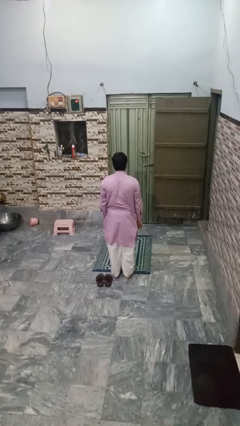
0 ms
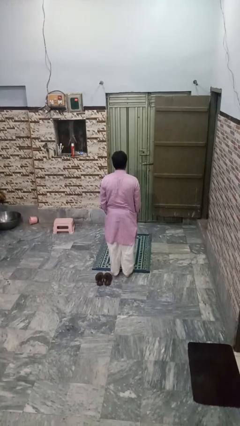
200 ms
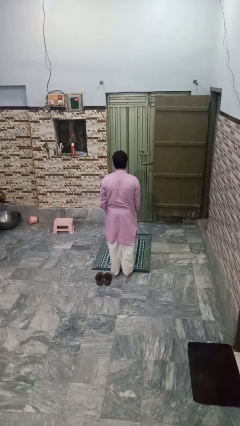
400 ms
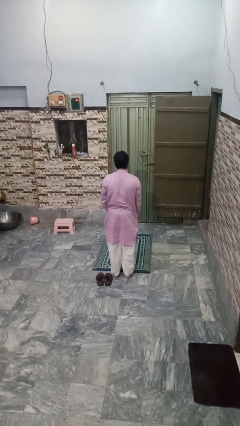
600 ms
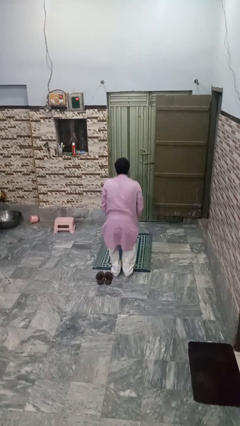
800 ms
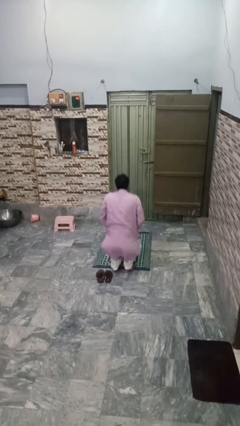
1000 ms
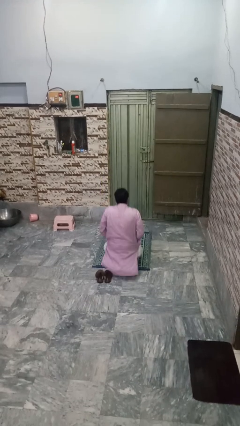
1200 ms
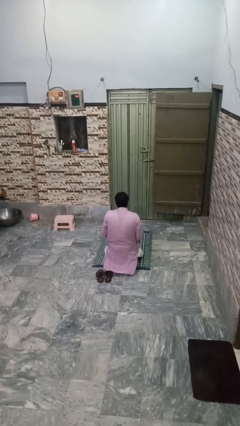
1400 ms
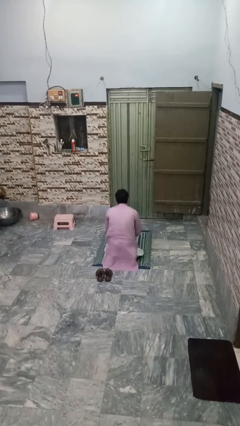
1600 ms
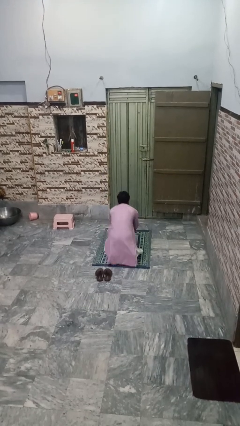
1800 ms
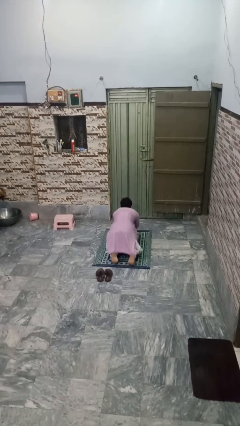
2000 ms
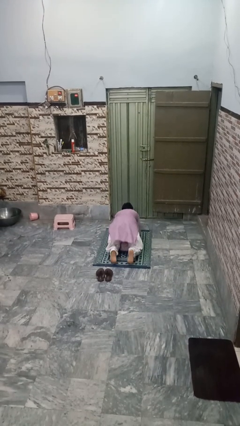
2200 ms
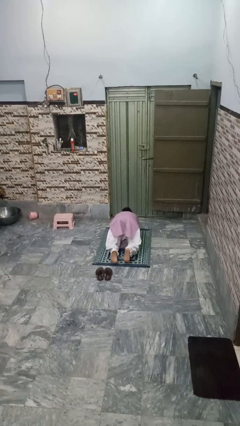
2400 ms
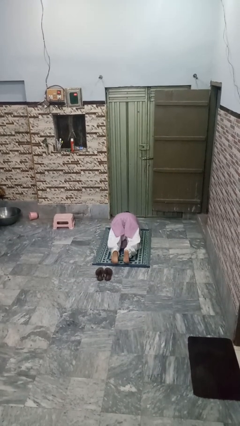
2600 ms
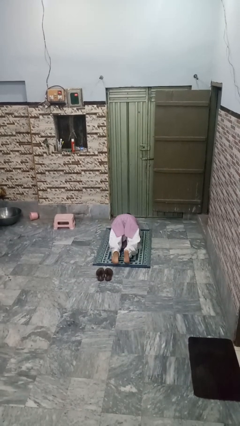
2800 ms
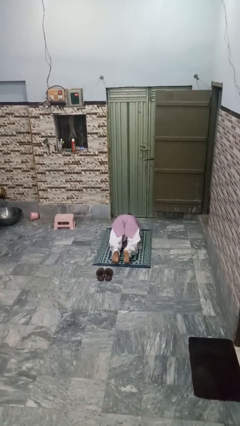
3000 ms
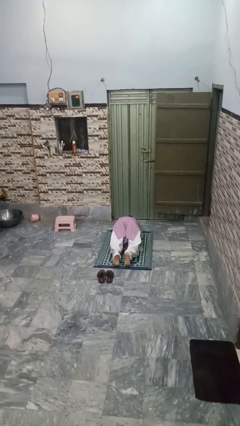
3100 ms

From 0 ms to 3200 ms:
person exercises with plank

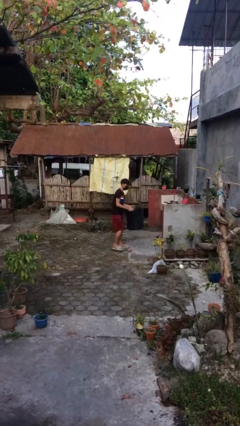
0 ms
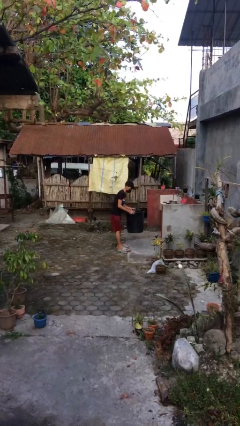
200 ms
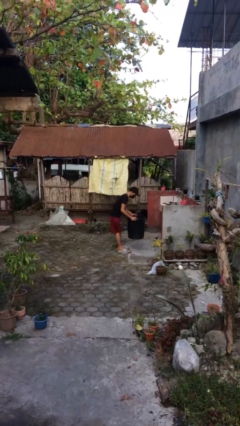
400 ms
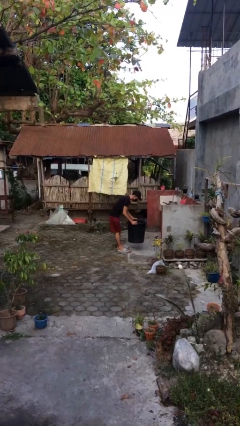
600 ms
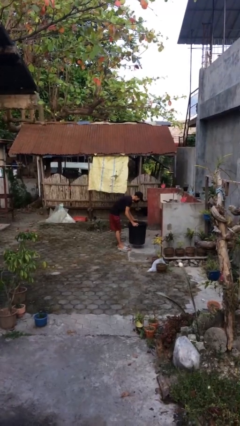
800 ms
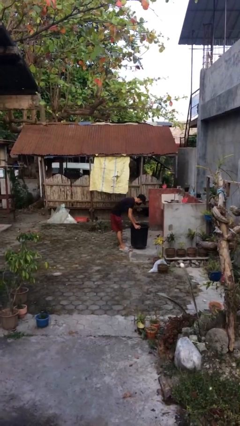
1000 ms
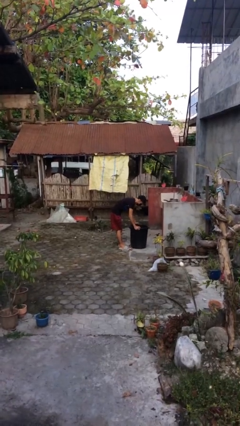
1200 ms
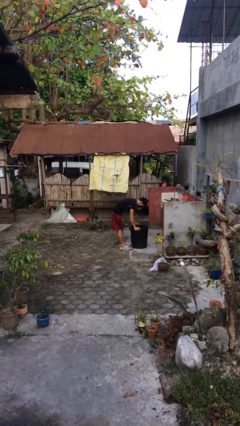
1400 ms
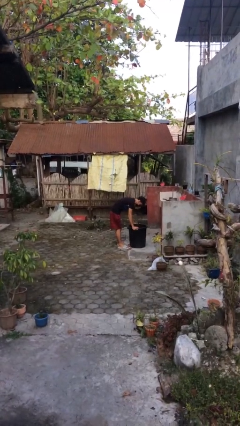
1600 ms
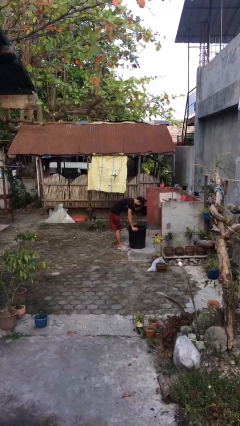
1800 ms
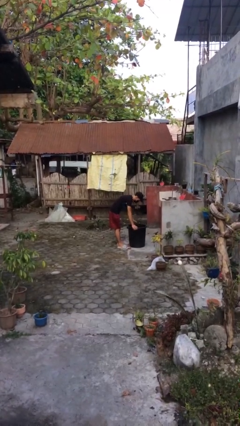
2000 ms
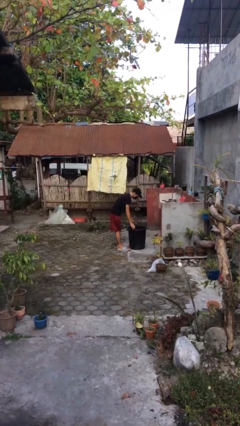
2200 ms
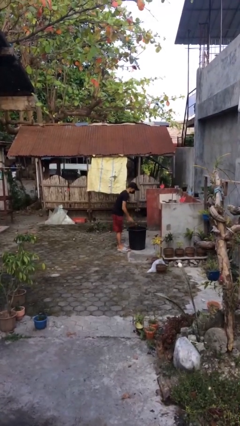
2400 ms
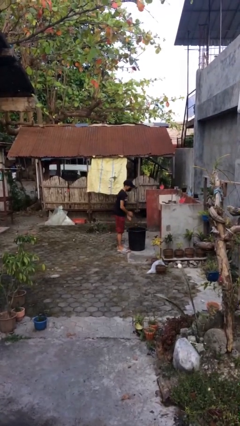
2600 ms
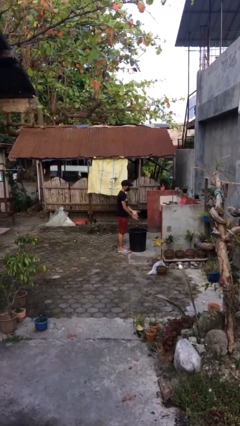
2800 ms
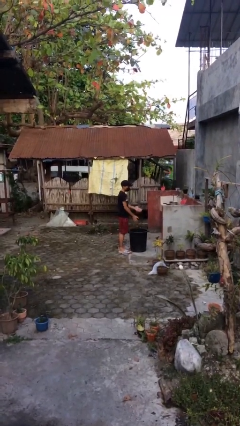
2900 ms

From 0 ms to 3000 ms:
person puts down object on floor

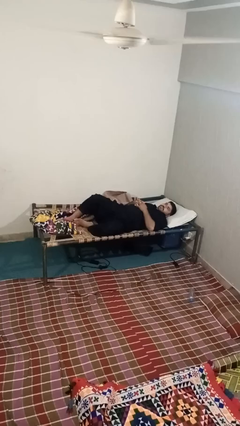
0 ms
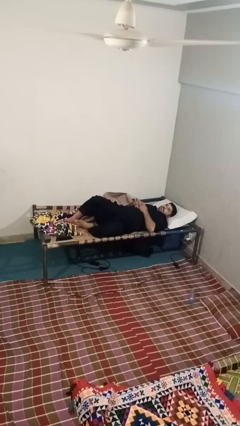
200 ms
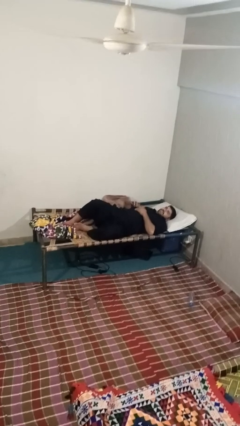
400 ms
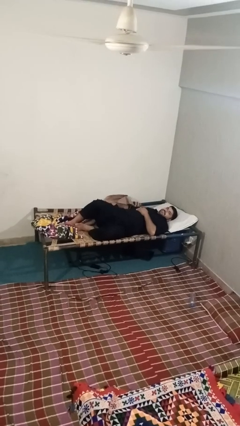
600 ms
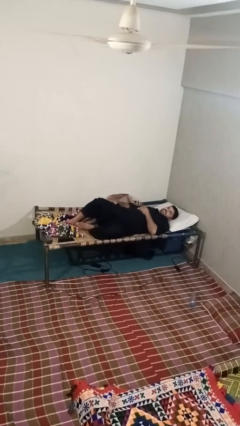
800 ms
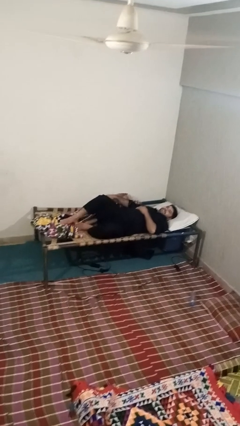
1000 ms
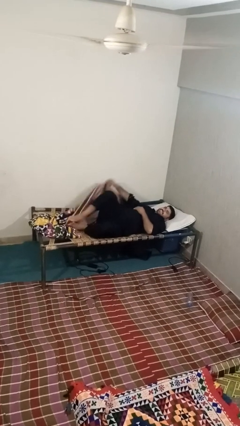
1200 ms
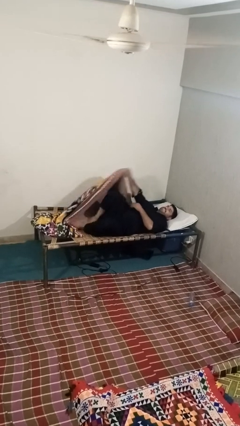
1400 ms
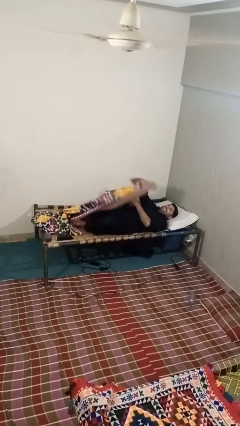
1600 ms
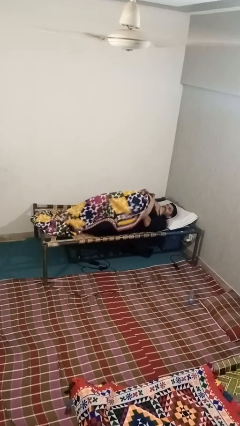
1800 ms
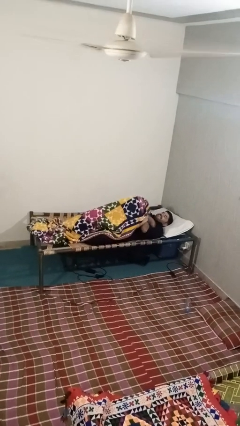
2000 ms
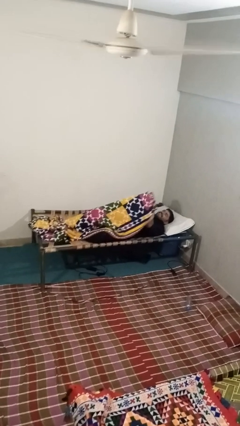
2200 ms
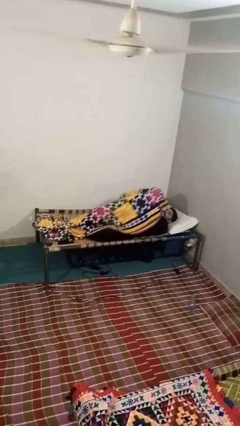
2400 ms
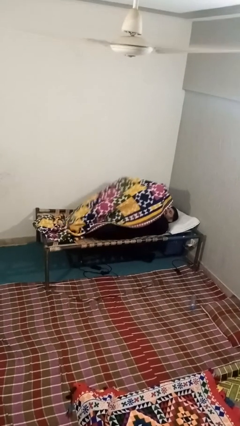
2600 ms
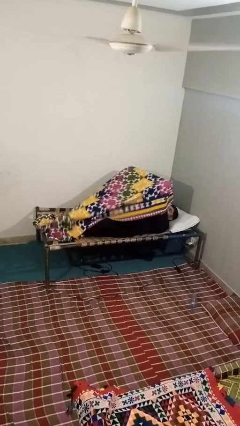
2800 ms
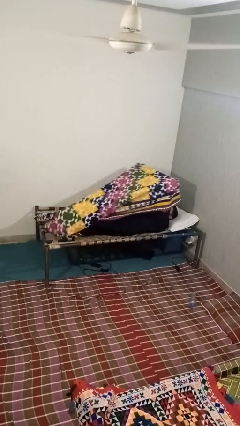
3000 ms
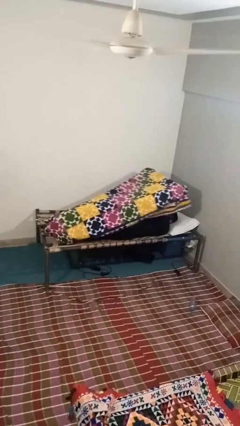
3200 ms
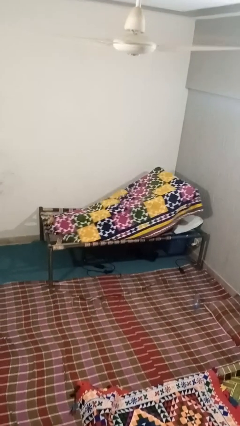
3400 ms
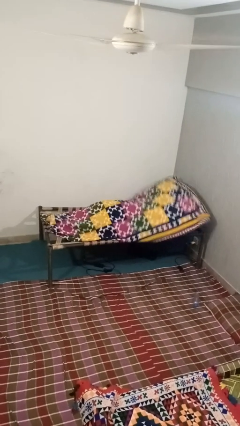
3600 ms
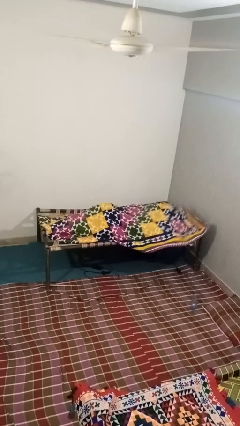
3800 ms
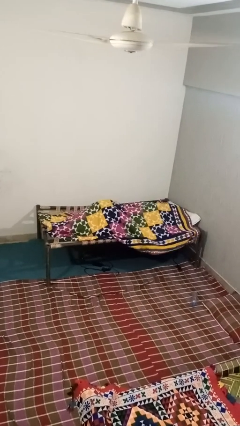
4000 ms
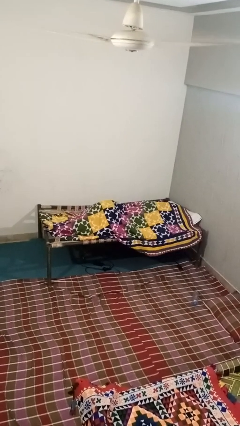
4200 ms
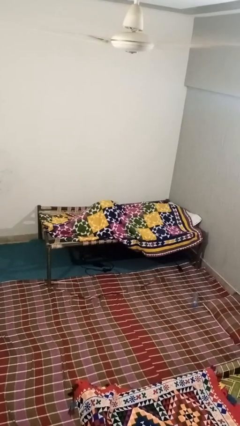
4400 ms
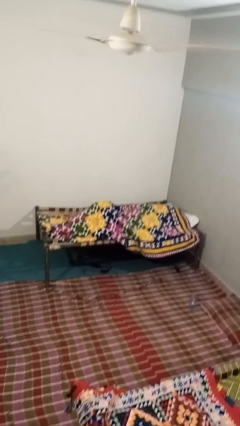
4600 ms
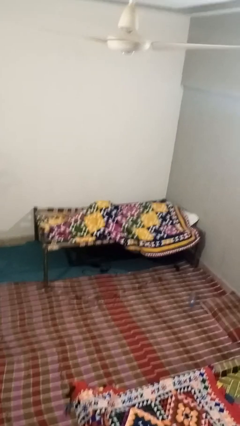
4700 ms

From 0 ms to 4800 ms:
person covers with blanket

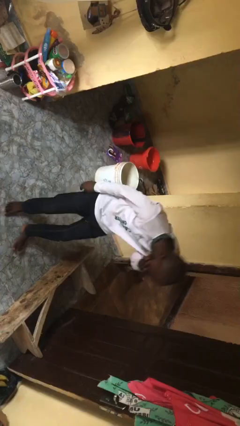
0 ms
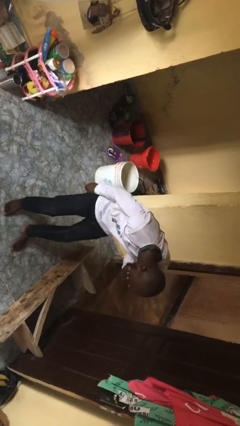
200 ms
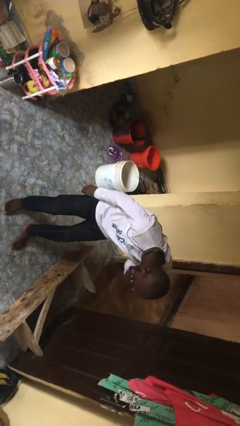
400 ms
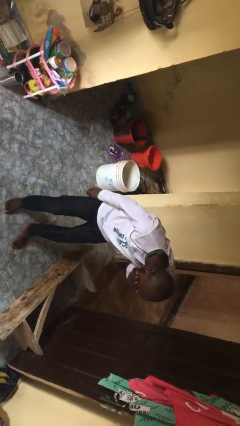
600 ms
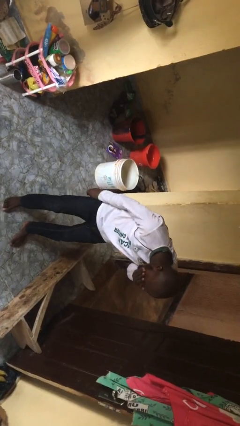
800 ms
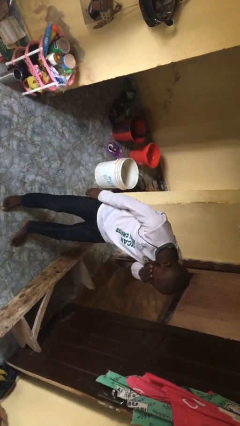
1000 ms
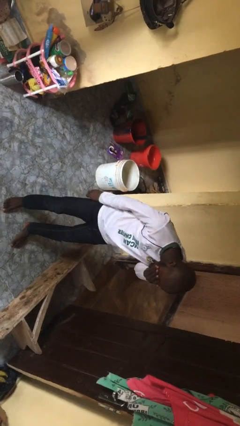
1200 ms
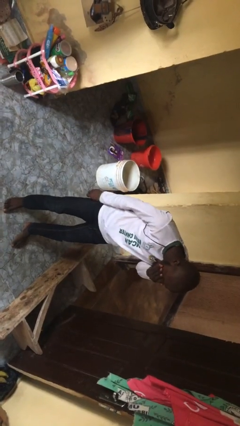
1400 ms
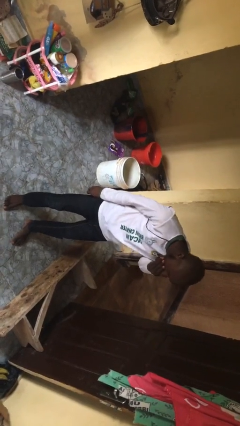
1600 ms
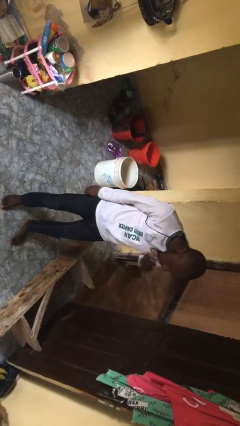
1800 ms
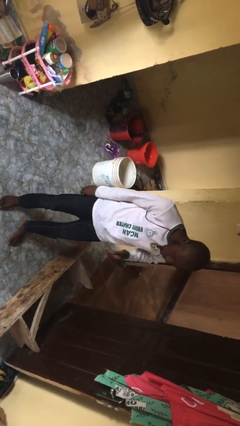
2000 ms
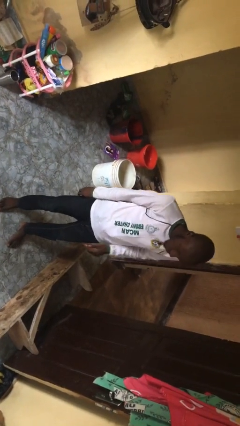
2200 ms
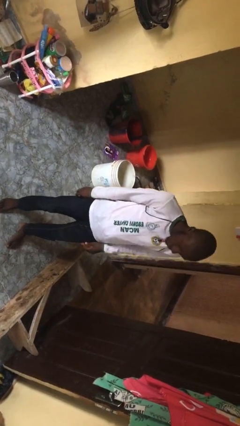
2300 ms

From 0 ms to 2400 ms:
person sneezes into hand

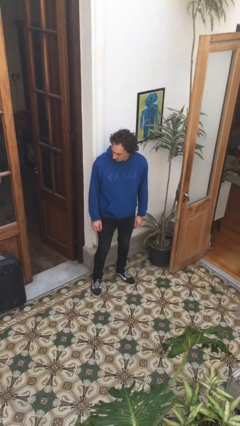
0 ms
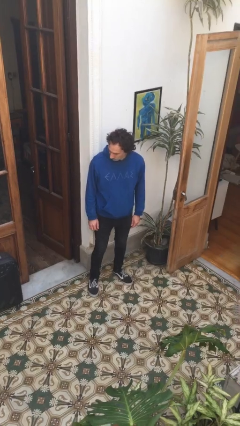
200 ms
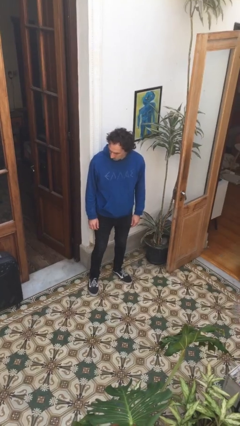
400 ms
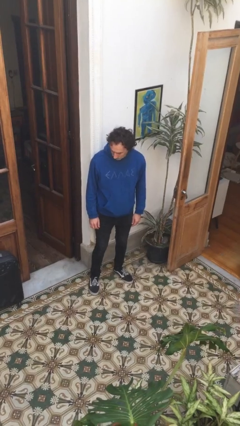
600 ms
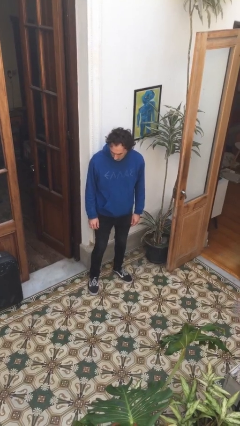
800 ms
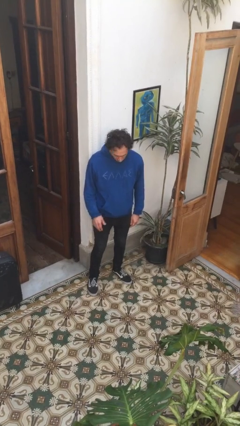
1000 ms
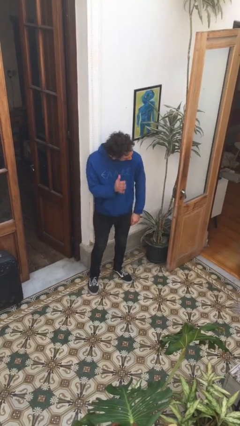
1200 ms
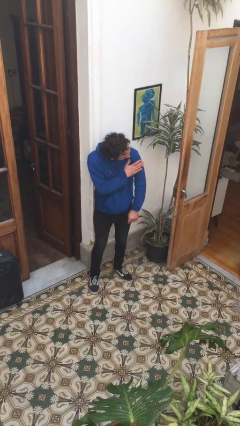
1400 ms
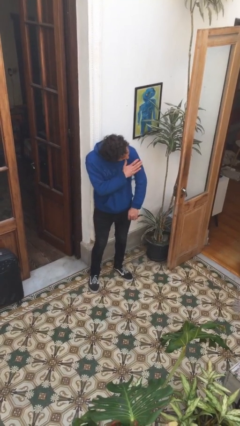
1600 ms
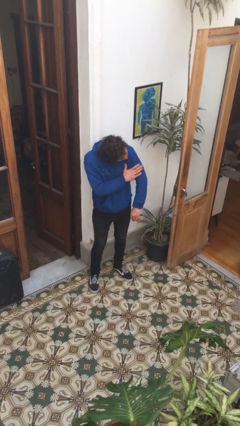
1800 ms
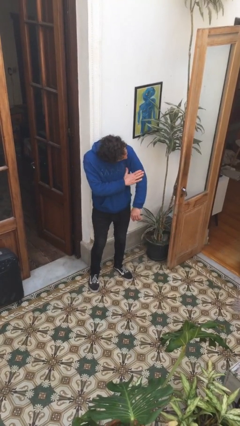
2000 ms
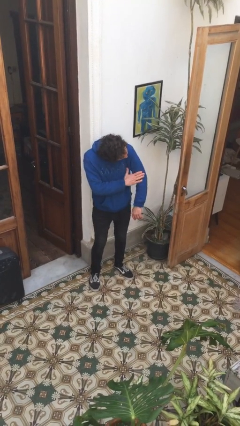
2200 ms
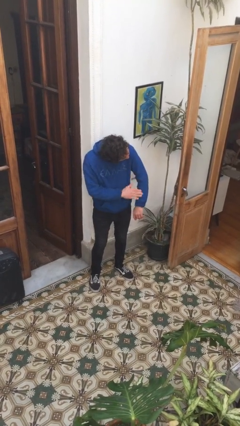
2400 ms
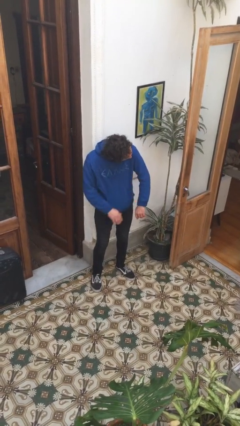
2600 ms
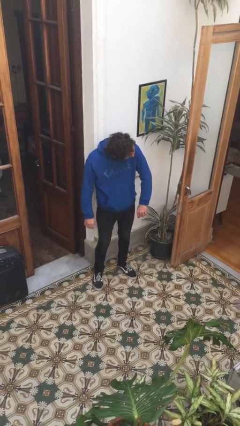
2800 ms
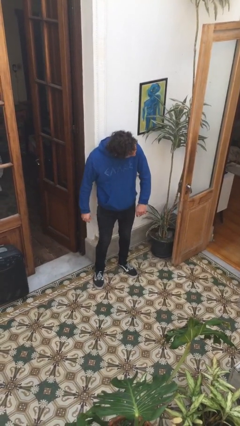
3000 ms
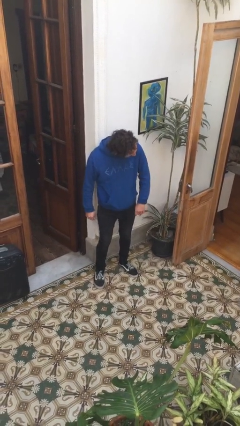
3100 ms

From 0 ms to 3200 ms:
person swats bug

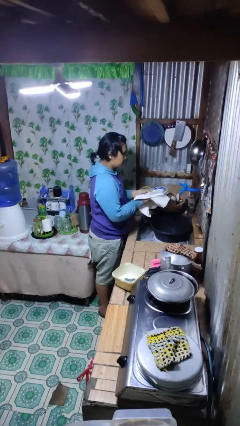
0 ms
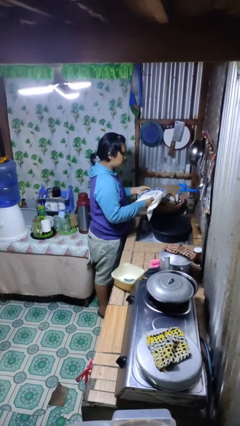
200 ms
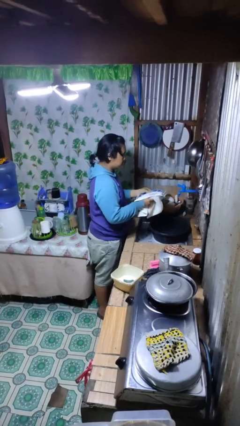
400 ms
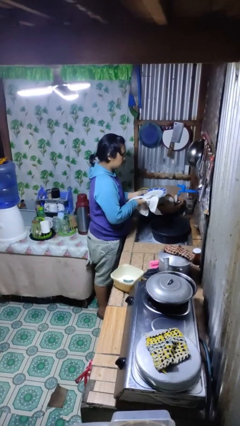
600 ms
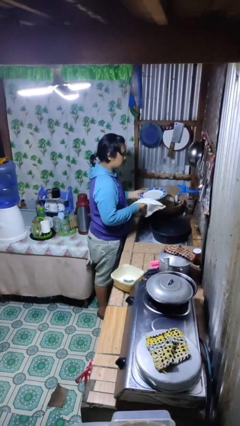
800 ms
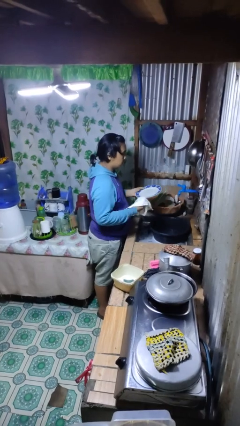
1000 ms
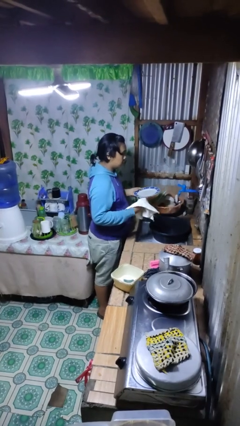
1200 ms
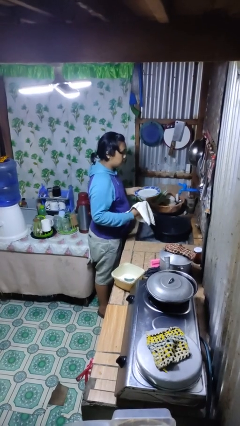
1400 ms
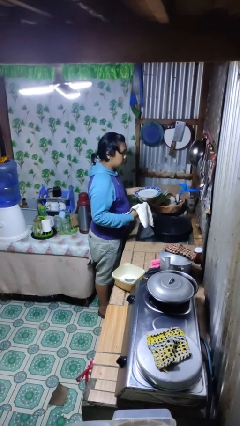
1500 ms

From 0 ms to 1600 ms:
person dries dish
